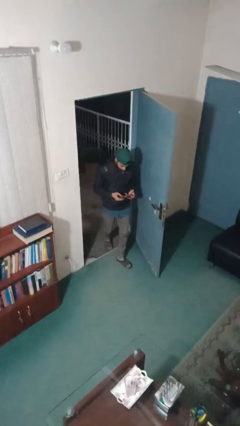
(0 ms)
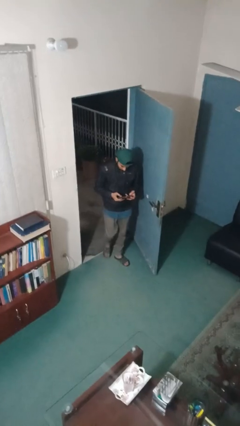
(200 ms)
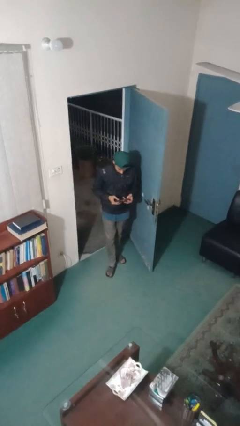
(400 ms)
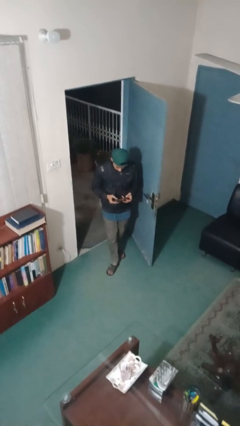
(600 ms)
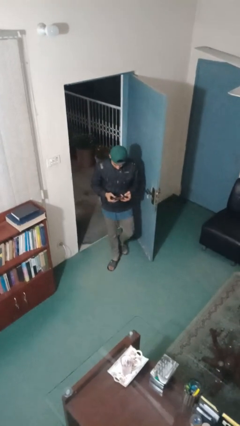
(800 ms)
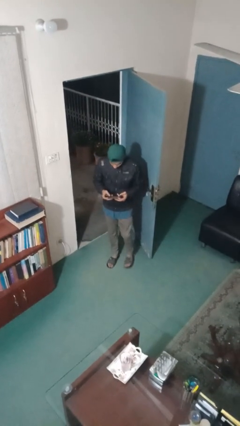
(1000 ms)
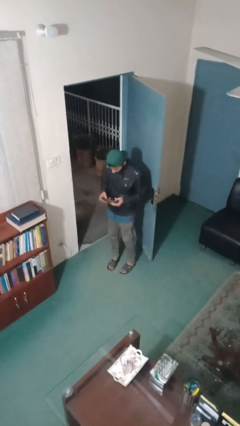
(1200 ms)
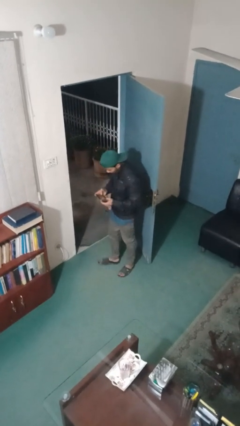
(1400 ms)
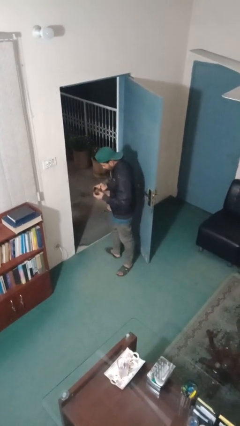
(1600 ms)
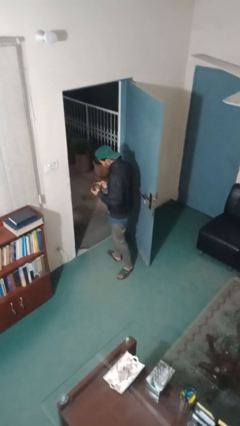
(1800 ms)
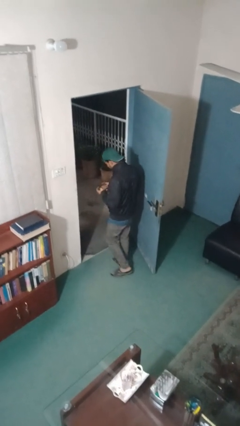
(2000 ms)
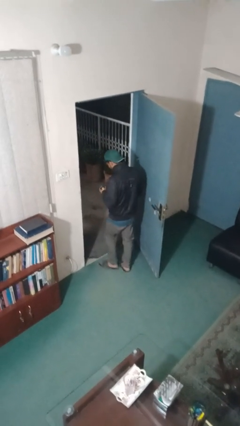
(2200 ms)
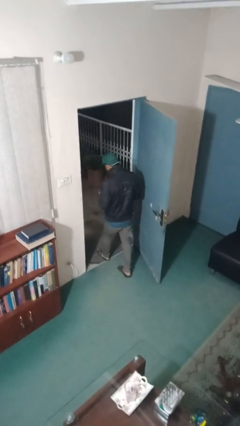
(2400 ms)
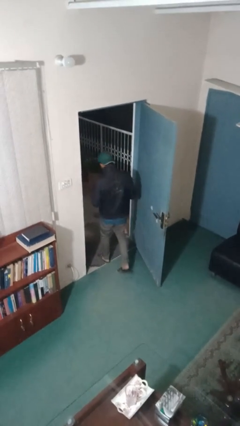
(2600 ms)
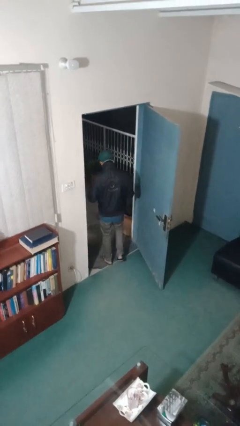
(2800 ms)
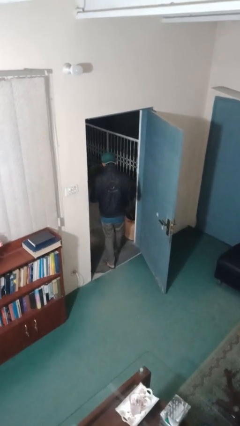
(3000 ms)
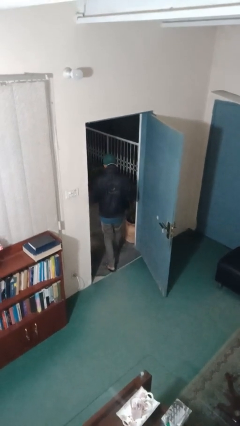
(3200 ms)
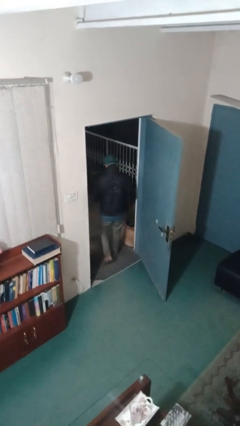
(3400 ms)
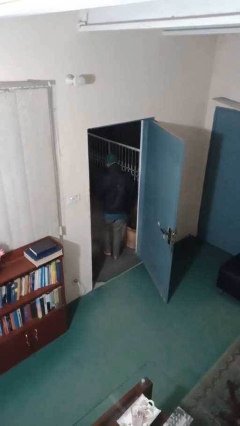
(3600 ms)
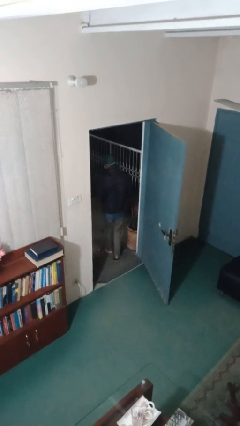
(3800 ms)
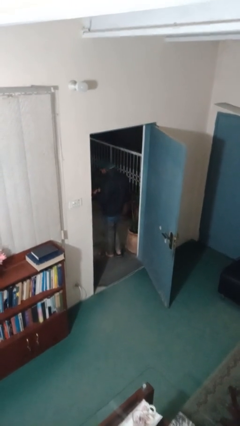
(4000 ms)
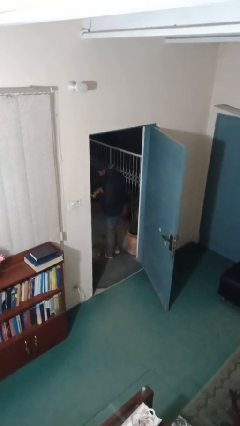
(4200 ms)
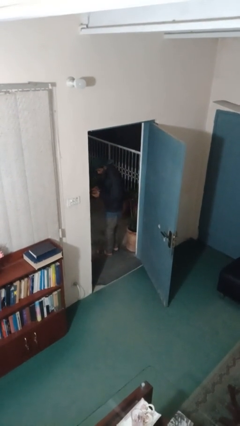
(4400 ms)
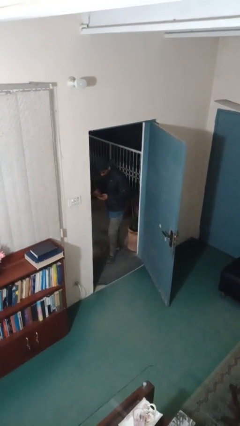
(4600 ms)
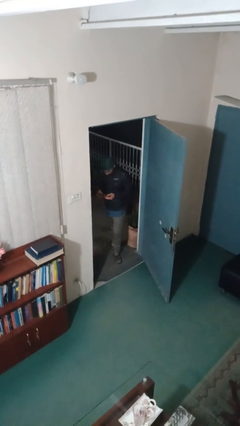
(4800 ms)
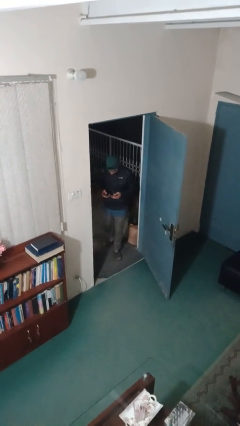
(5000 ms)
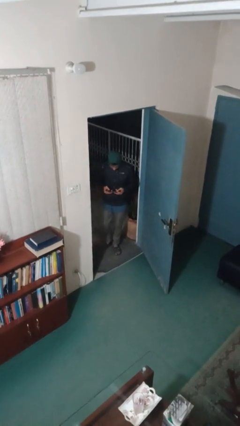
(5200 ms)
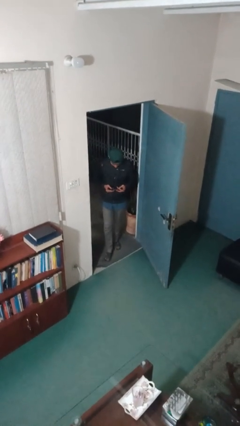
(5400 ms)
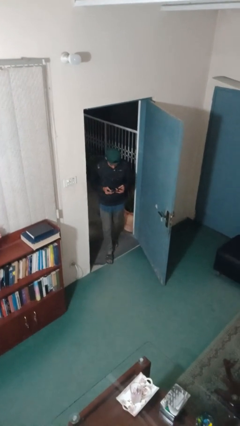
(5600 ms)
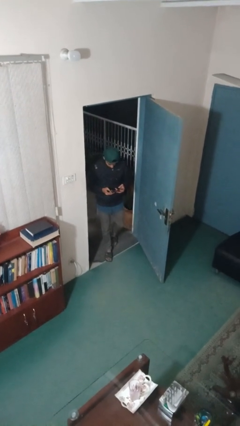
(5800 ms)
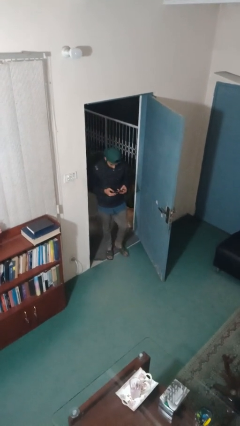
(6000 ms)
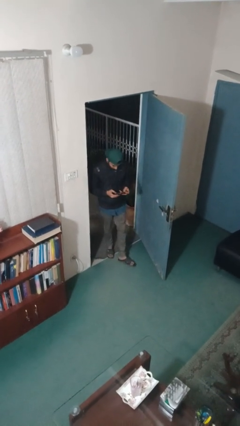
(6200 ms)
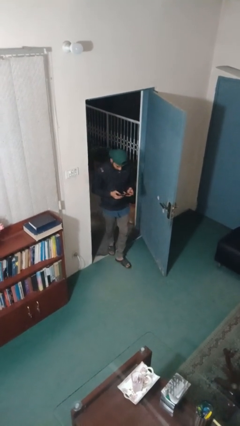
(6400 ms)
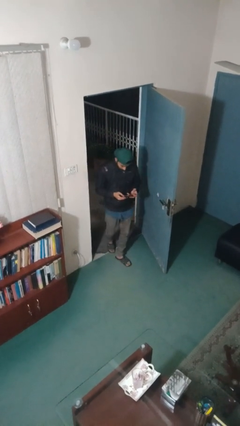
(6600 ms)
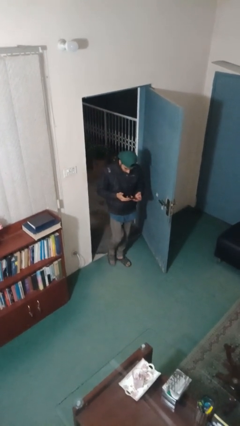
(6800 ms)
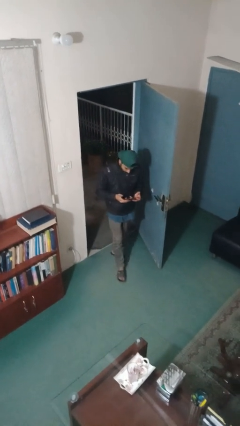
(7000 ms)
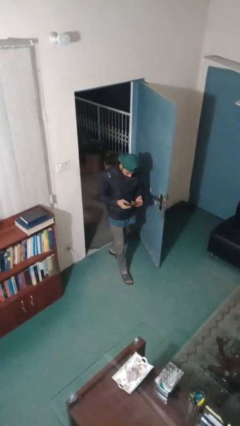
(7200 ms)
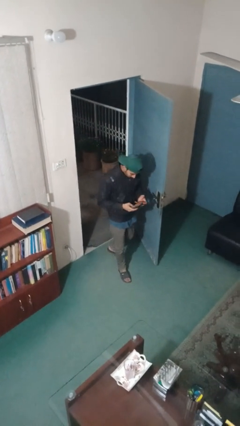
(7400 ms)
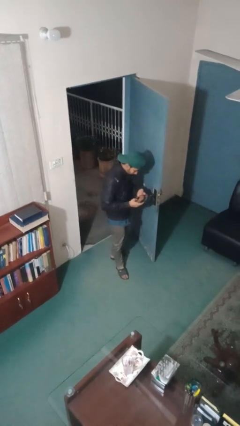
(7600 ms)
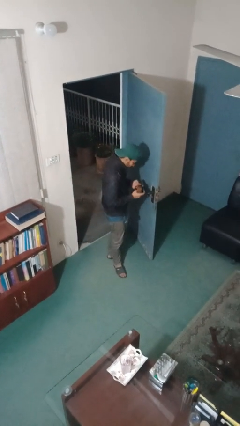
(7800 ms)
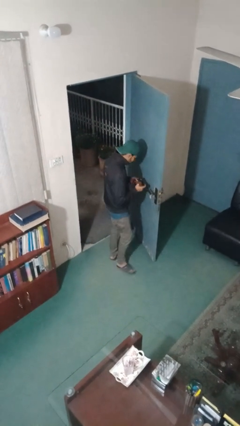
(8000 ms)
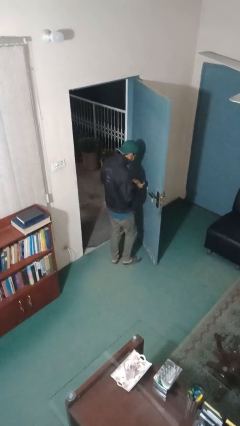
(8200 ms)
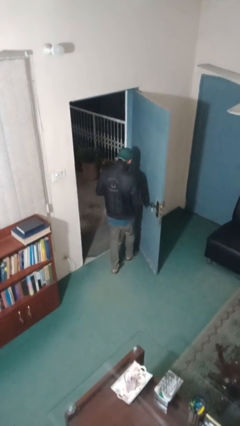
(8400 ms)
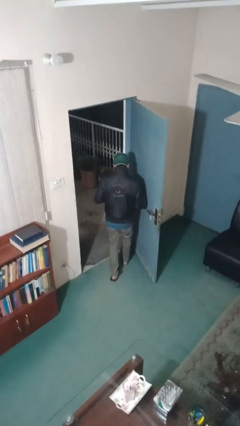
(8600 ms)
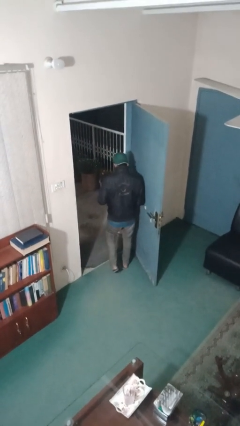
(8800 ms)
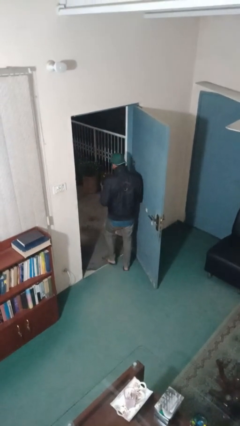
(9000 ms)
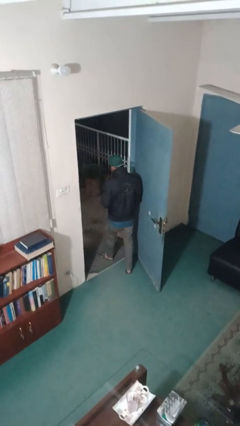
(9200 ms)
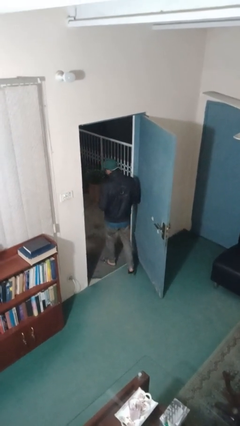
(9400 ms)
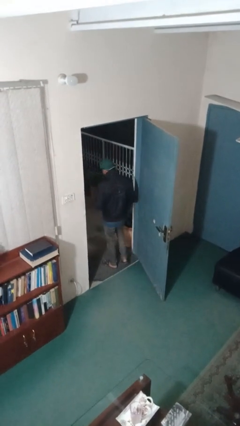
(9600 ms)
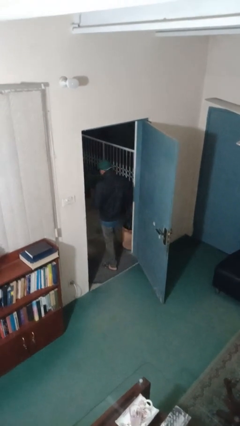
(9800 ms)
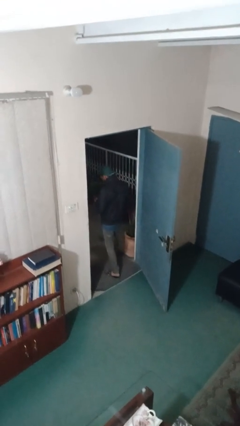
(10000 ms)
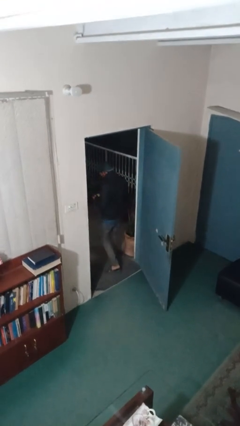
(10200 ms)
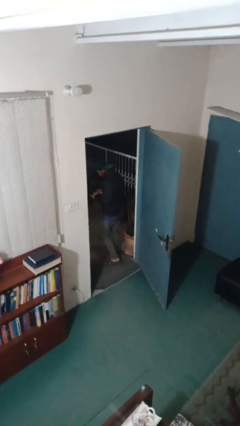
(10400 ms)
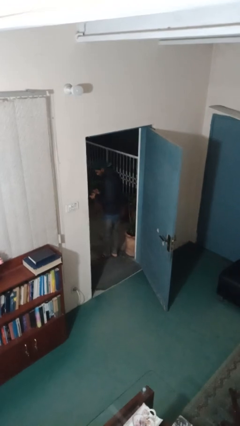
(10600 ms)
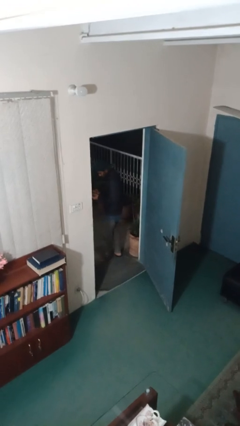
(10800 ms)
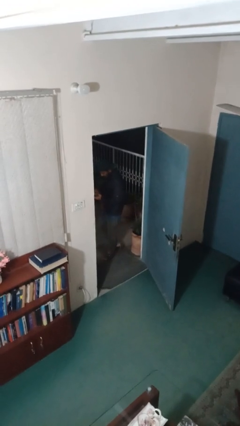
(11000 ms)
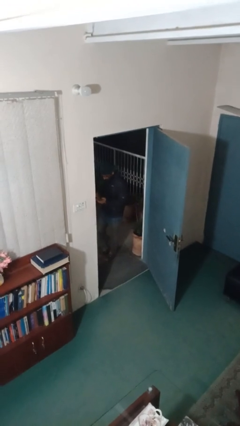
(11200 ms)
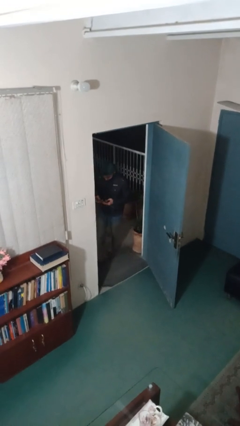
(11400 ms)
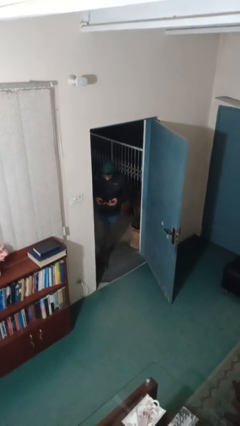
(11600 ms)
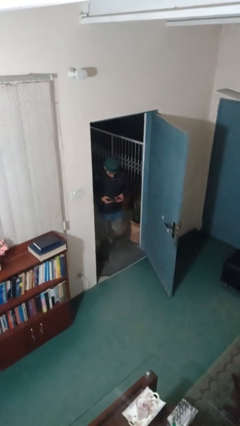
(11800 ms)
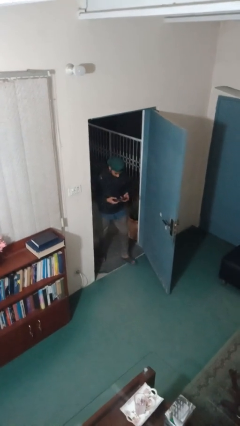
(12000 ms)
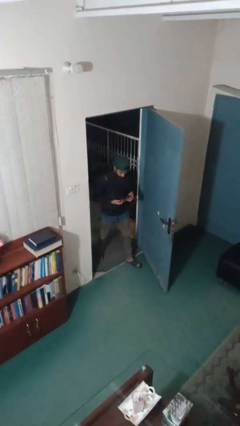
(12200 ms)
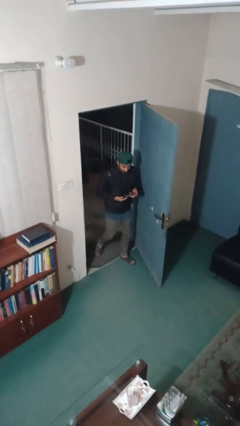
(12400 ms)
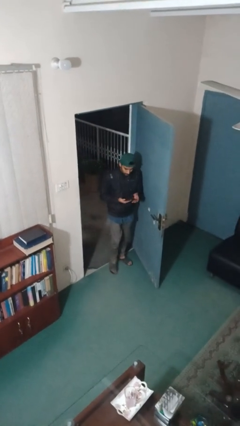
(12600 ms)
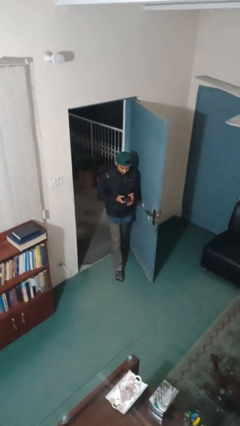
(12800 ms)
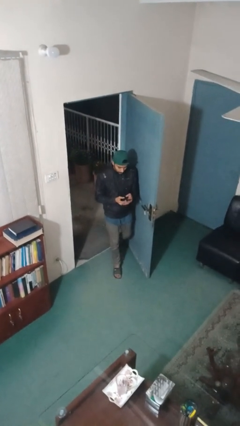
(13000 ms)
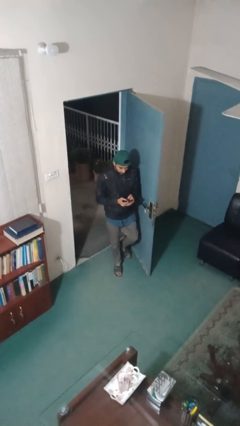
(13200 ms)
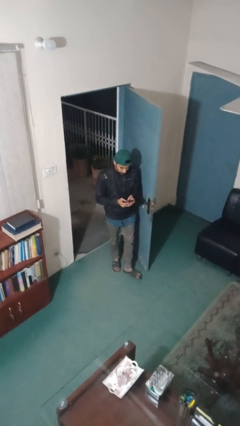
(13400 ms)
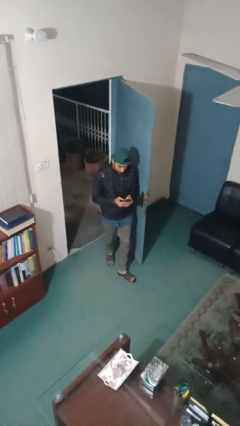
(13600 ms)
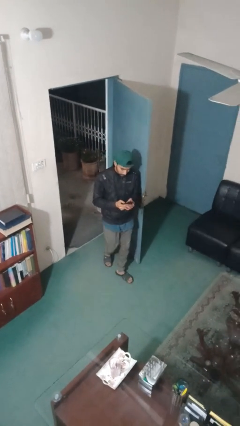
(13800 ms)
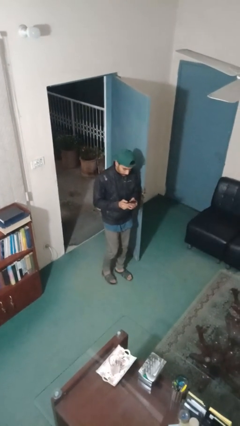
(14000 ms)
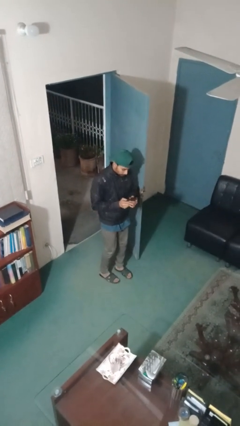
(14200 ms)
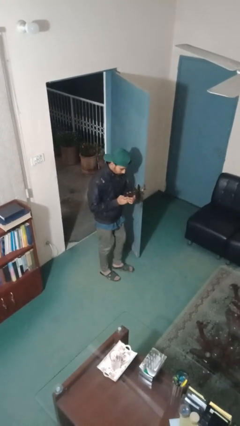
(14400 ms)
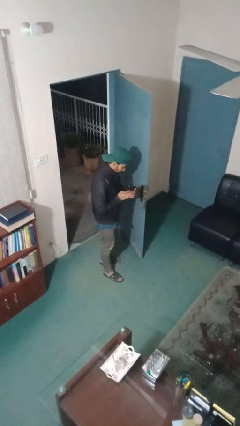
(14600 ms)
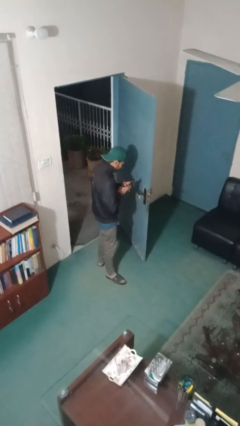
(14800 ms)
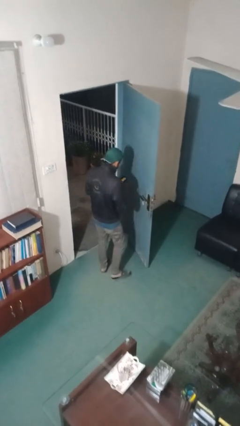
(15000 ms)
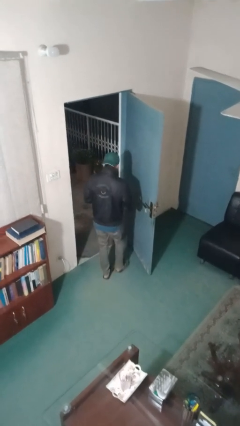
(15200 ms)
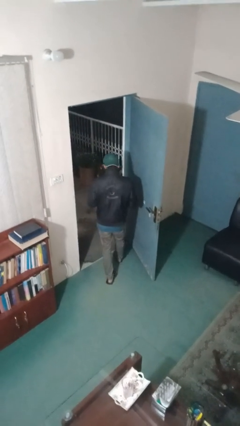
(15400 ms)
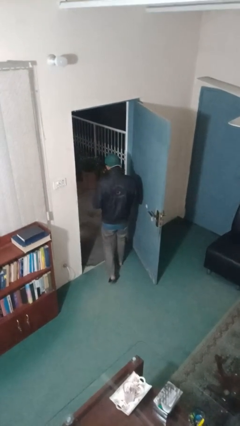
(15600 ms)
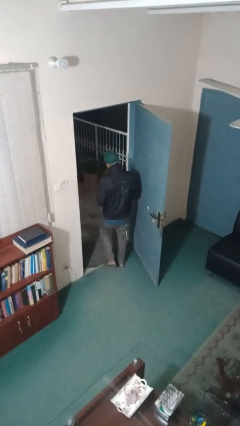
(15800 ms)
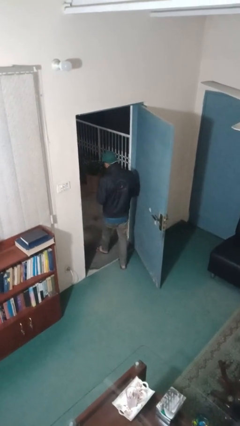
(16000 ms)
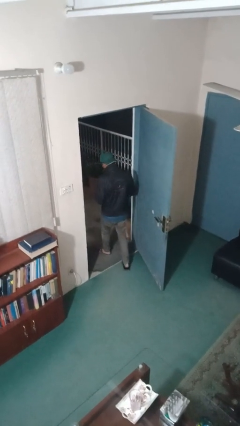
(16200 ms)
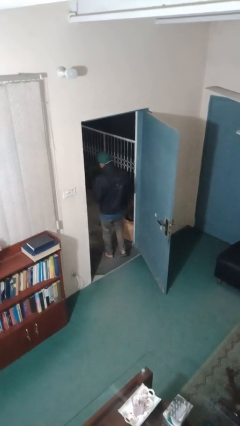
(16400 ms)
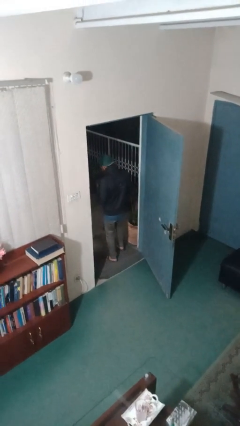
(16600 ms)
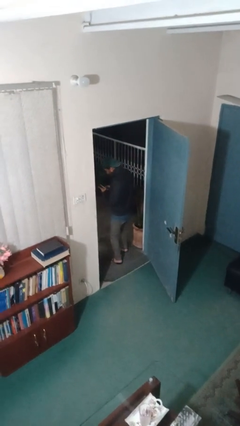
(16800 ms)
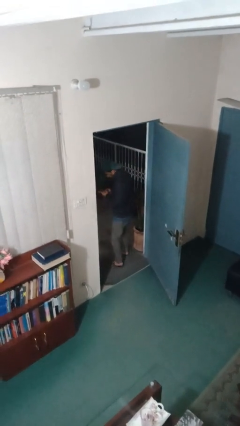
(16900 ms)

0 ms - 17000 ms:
person texts on phone

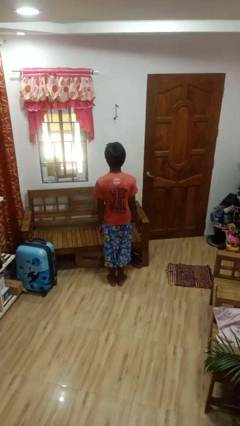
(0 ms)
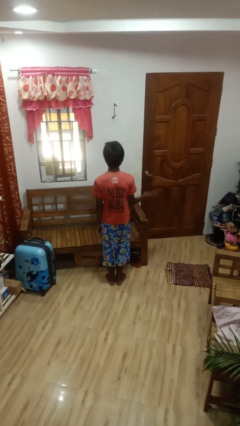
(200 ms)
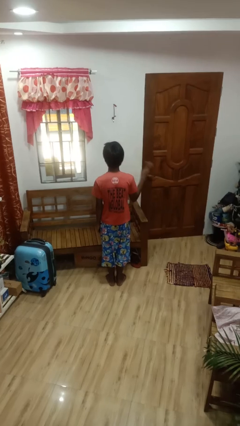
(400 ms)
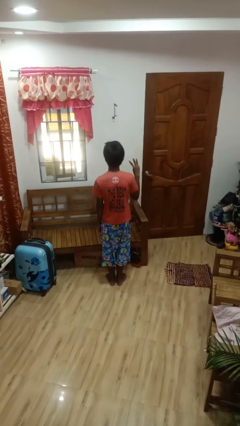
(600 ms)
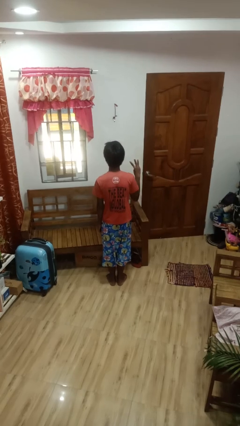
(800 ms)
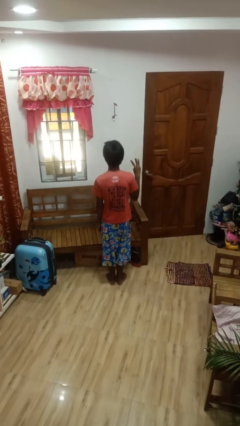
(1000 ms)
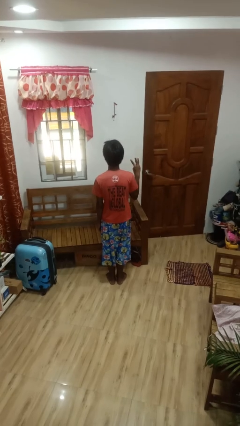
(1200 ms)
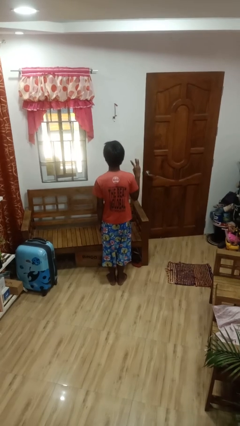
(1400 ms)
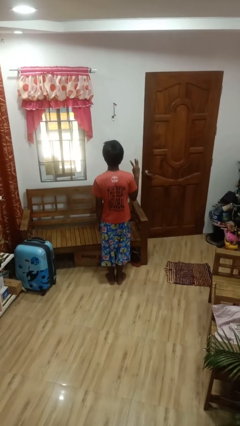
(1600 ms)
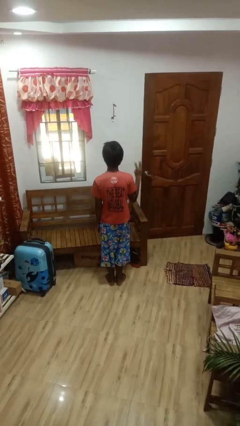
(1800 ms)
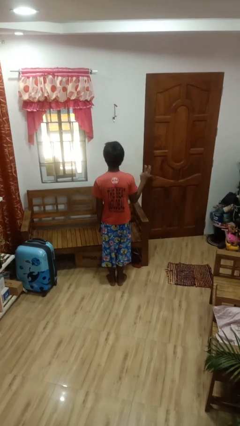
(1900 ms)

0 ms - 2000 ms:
person gestures number three
